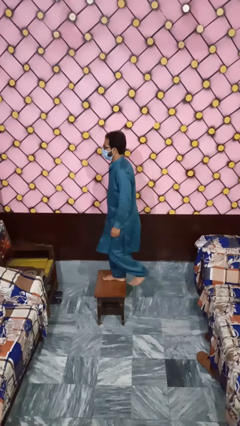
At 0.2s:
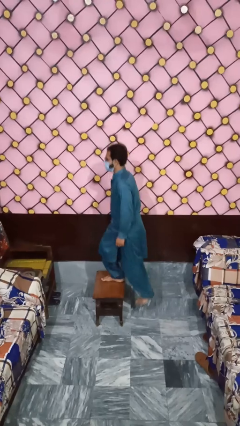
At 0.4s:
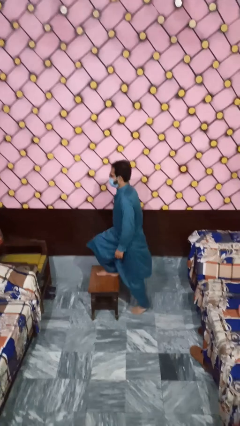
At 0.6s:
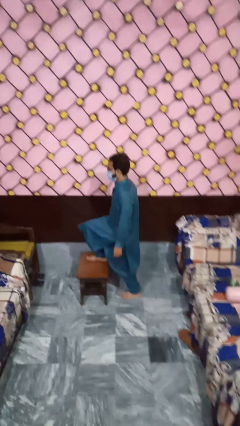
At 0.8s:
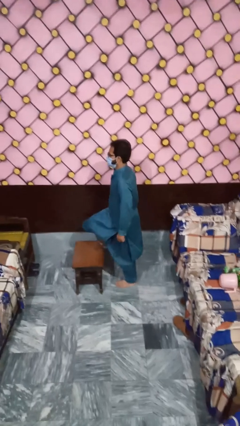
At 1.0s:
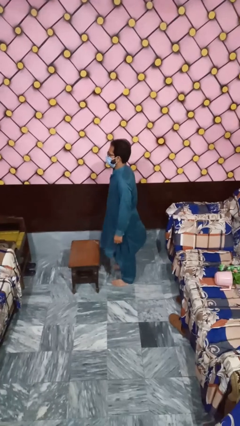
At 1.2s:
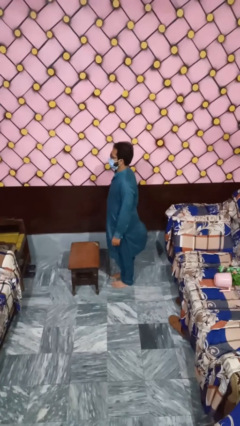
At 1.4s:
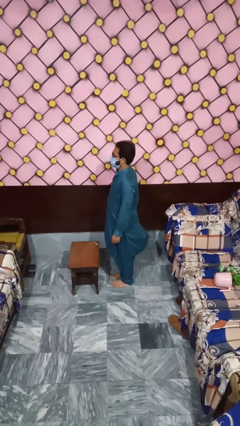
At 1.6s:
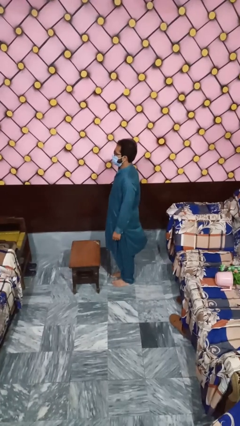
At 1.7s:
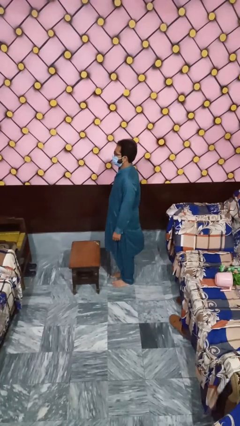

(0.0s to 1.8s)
person climbs off table

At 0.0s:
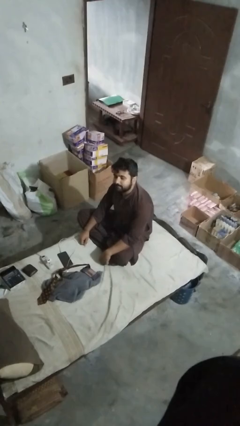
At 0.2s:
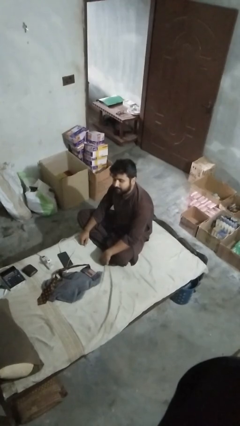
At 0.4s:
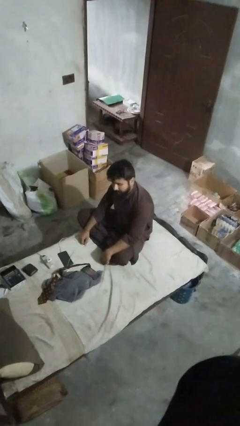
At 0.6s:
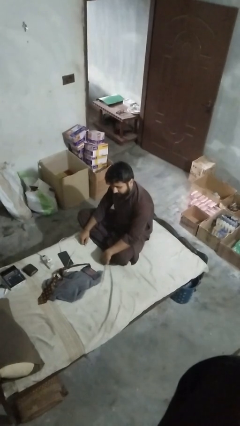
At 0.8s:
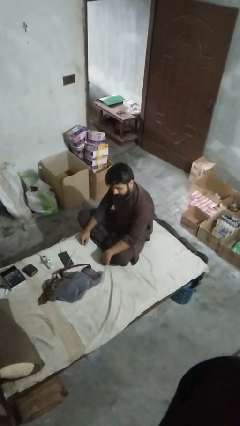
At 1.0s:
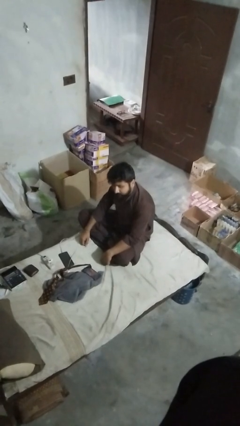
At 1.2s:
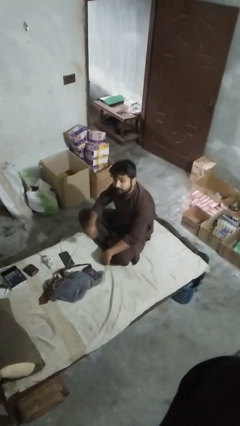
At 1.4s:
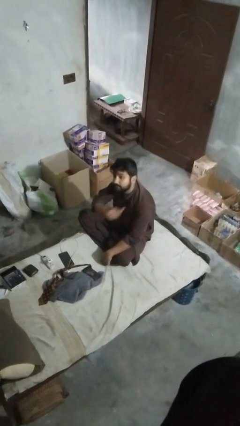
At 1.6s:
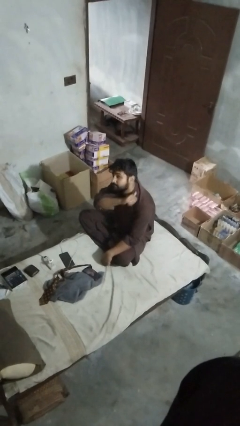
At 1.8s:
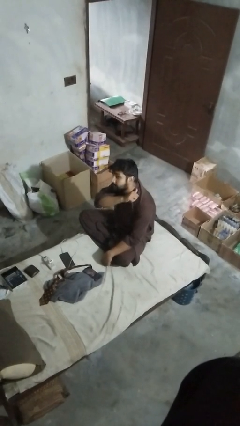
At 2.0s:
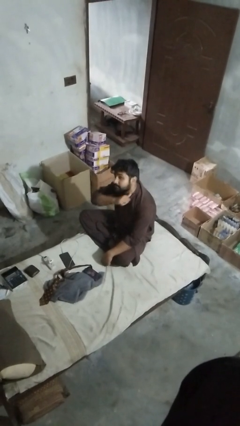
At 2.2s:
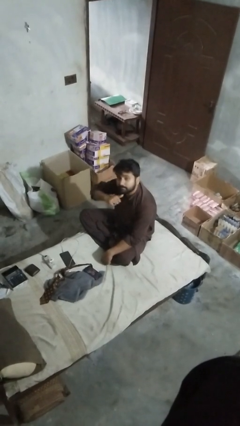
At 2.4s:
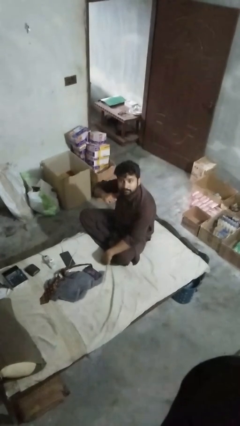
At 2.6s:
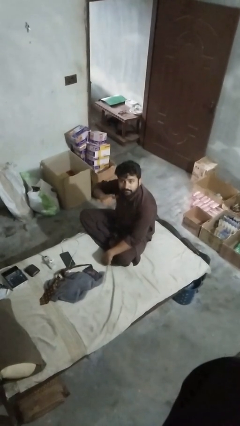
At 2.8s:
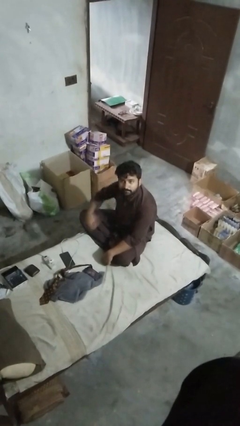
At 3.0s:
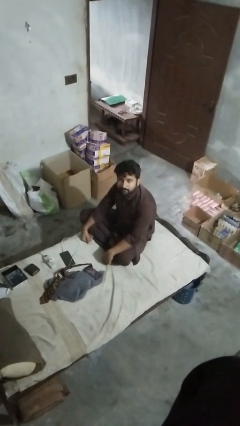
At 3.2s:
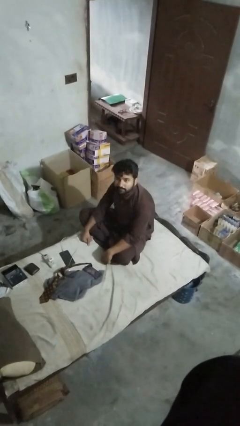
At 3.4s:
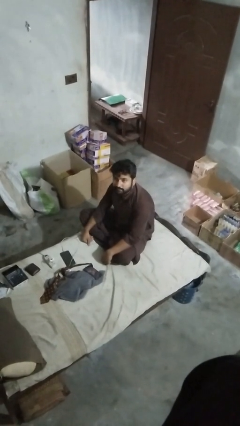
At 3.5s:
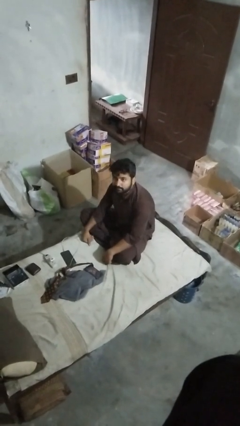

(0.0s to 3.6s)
person gestures cut

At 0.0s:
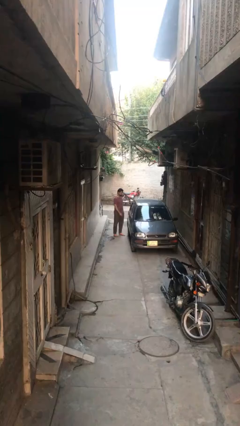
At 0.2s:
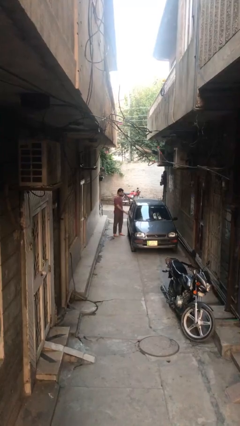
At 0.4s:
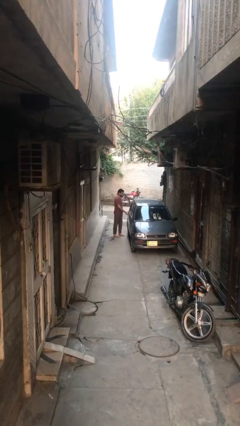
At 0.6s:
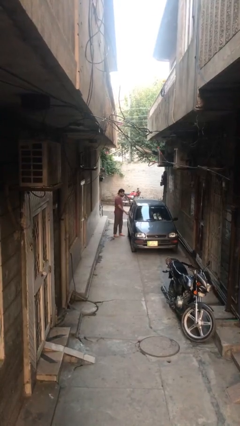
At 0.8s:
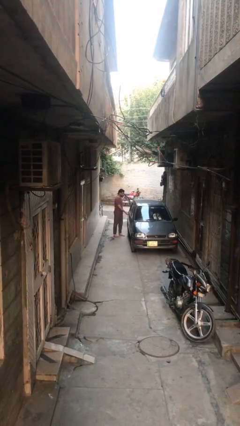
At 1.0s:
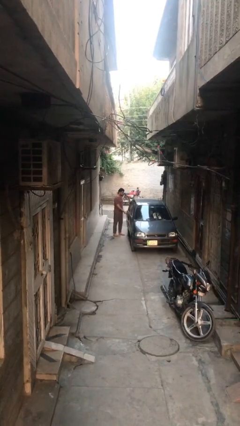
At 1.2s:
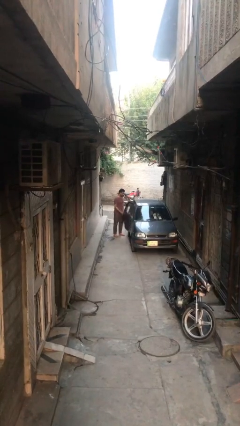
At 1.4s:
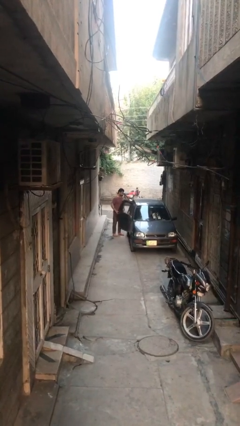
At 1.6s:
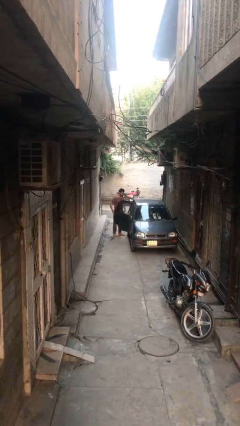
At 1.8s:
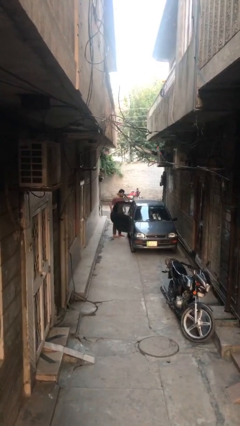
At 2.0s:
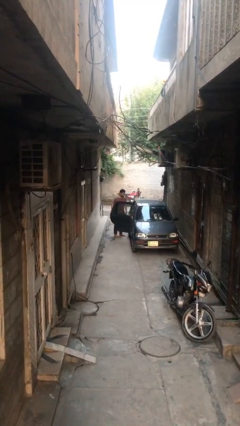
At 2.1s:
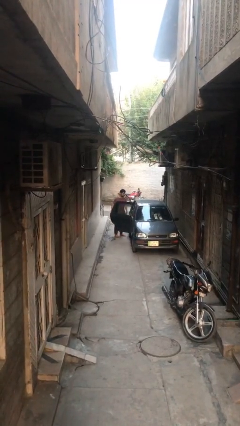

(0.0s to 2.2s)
person opens car door

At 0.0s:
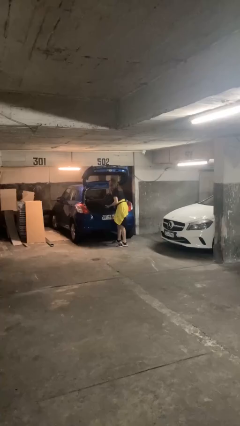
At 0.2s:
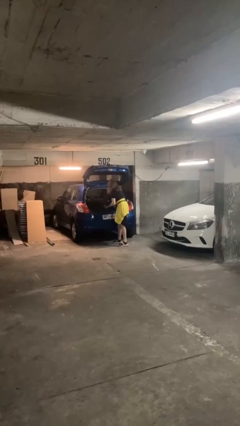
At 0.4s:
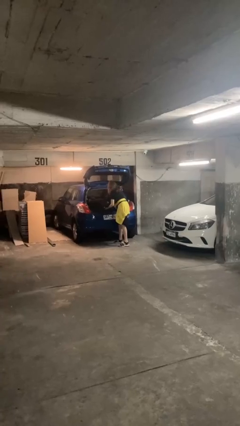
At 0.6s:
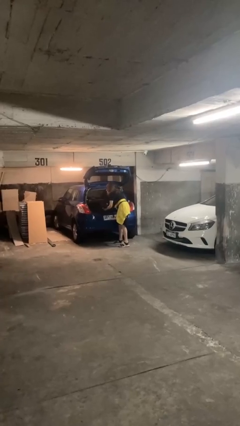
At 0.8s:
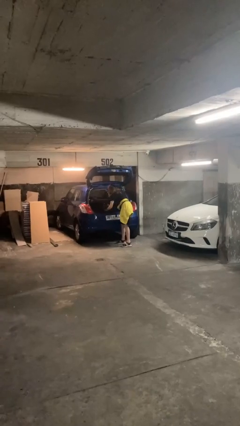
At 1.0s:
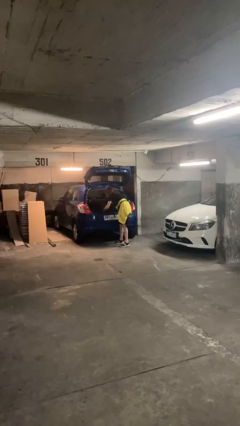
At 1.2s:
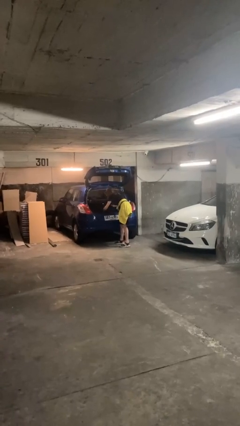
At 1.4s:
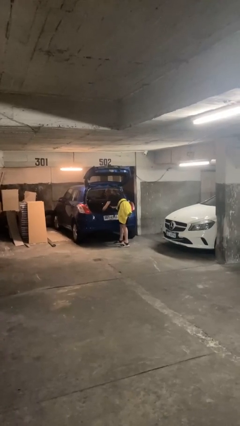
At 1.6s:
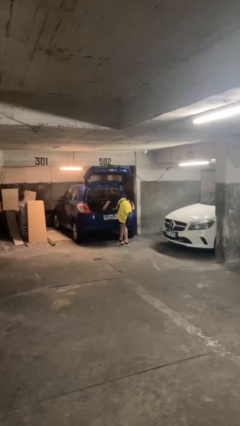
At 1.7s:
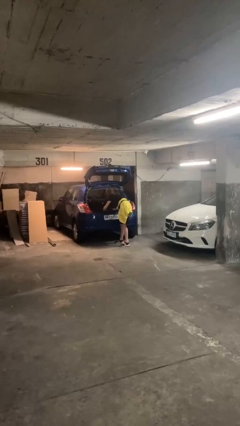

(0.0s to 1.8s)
person loads car

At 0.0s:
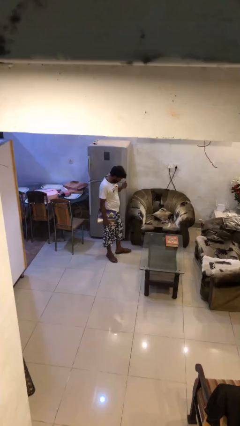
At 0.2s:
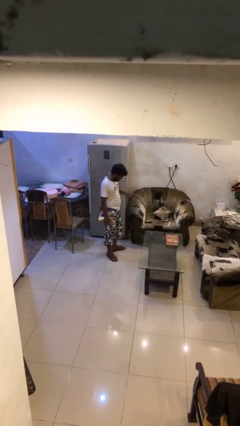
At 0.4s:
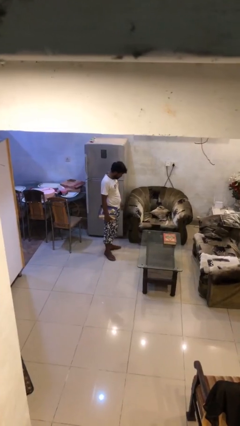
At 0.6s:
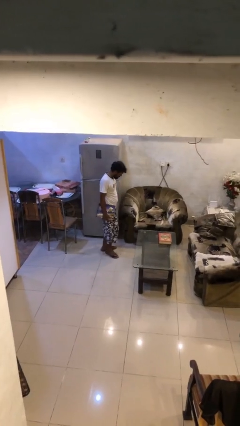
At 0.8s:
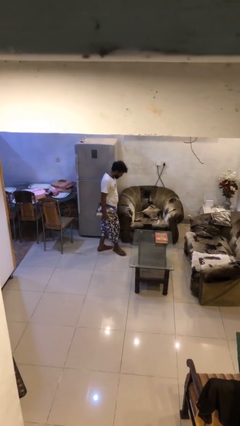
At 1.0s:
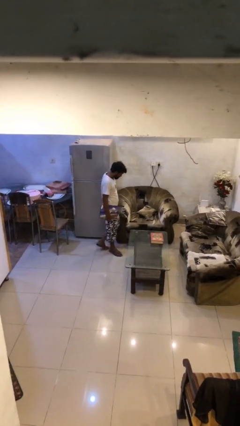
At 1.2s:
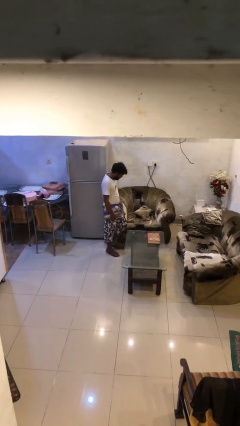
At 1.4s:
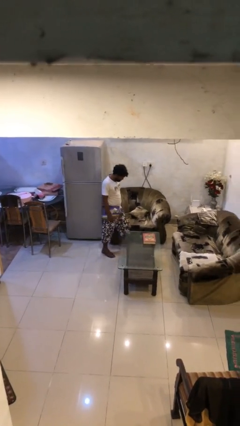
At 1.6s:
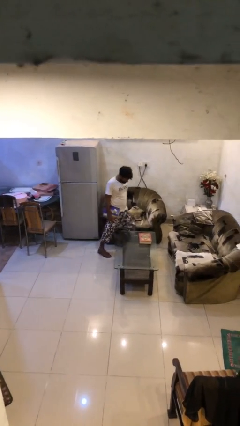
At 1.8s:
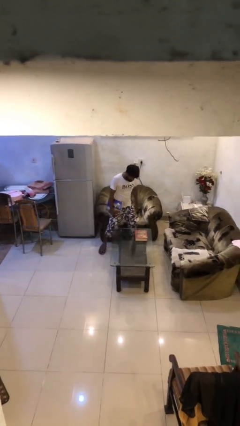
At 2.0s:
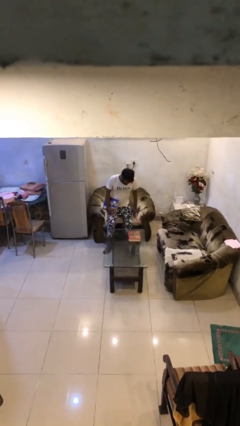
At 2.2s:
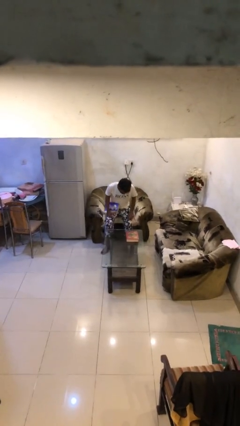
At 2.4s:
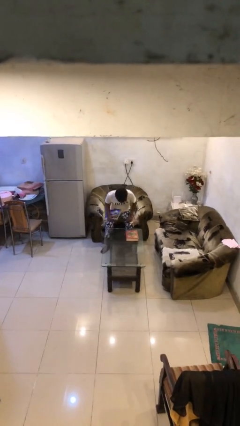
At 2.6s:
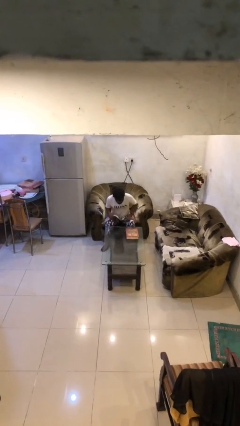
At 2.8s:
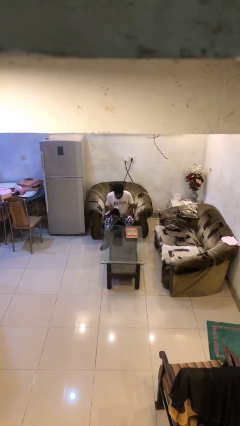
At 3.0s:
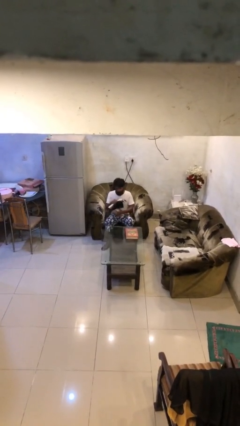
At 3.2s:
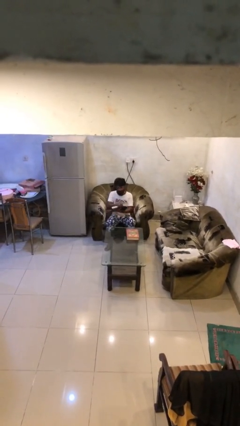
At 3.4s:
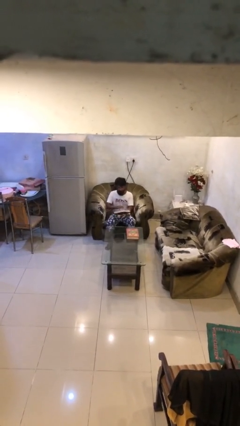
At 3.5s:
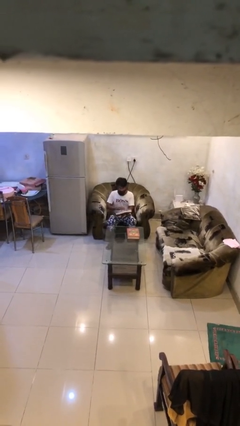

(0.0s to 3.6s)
person sits down

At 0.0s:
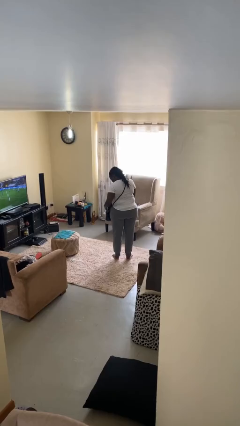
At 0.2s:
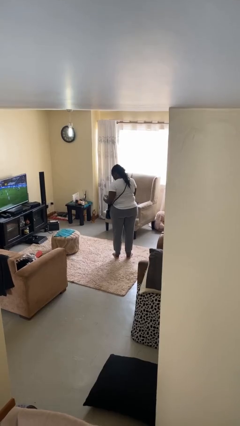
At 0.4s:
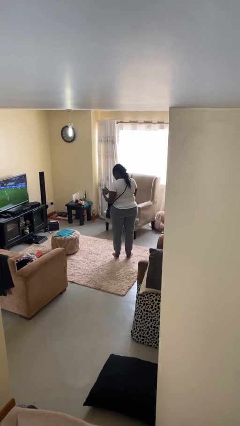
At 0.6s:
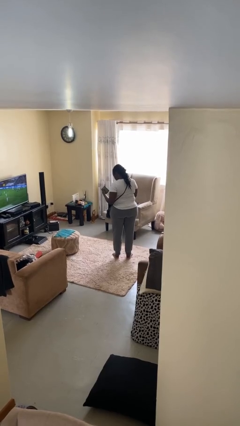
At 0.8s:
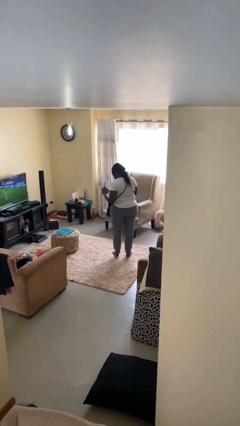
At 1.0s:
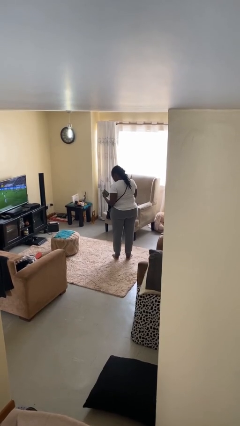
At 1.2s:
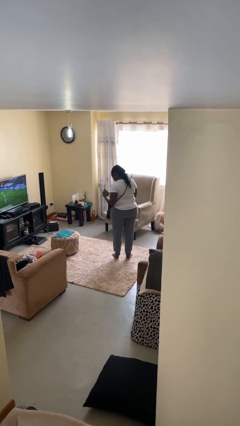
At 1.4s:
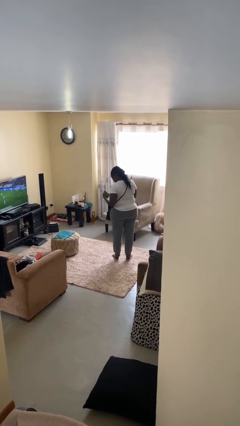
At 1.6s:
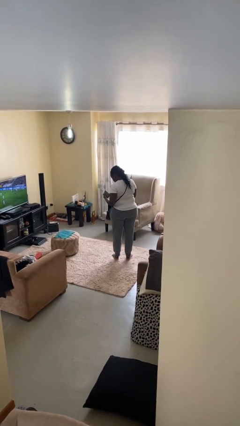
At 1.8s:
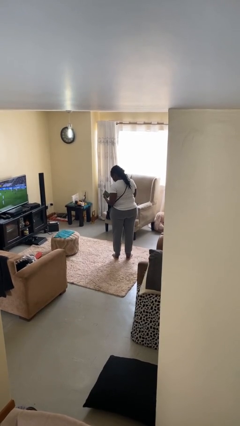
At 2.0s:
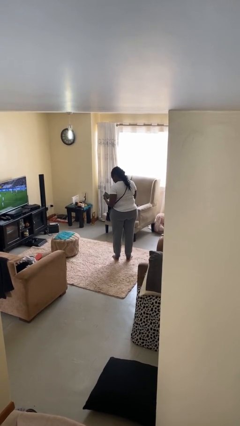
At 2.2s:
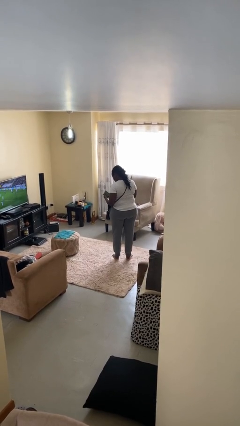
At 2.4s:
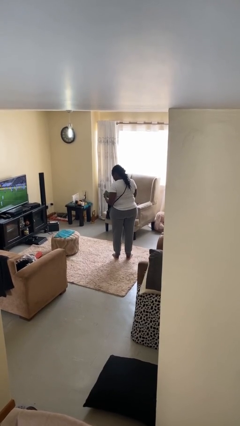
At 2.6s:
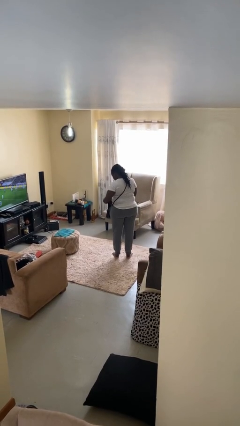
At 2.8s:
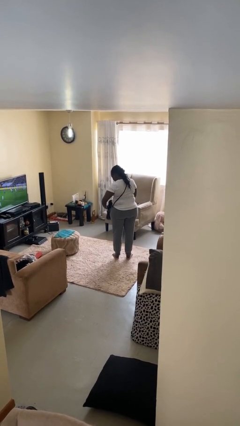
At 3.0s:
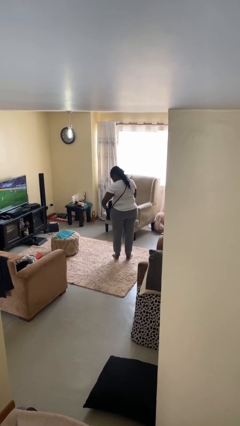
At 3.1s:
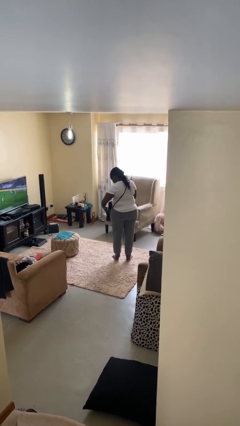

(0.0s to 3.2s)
person takes object from purse

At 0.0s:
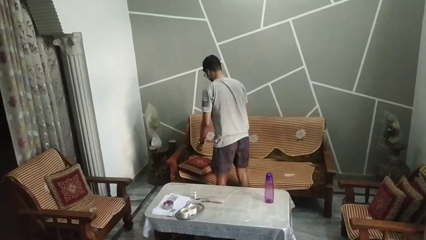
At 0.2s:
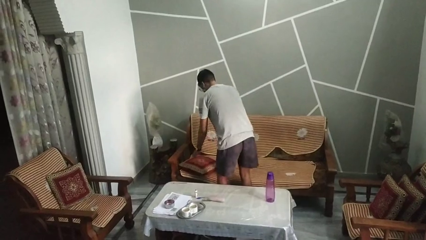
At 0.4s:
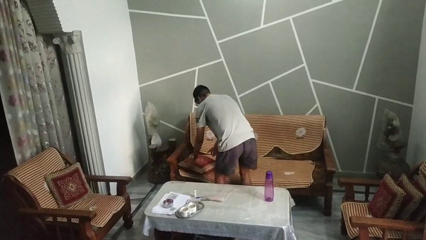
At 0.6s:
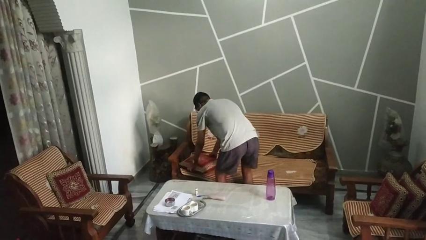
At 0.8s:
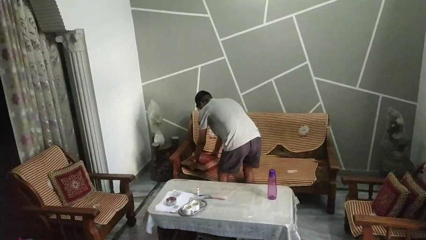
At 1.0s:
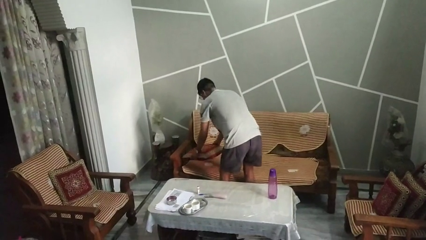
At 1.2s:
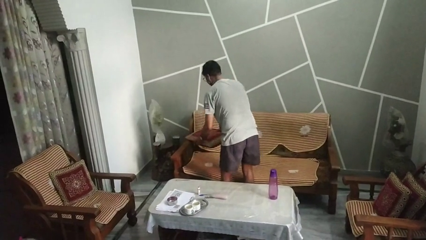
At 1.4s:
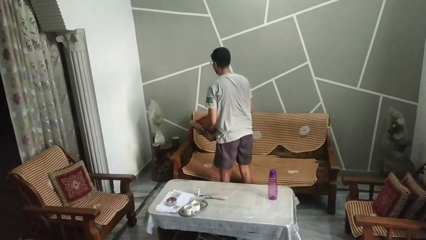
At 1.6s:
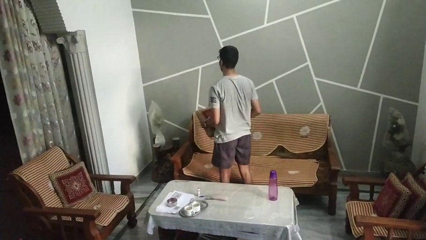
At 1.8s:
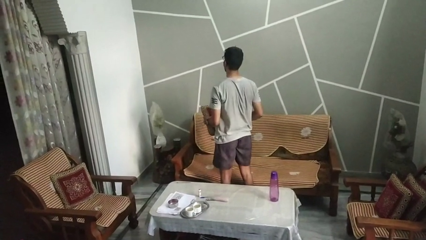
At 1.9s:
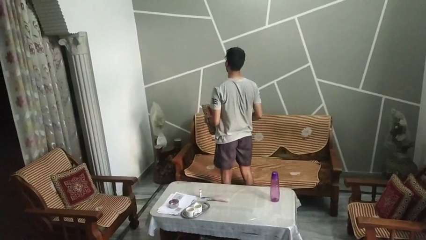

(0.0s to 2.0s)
person picks up object from couch
